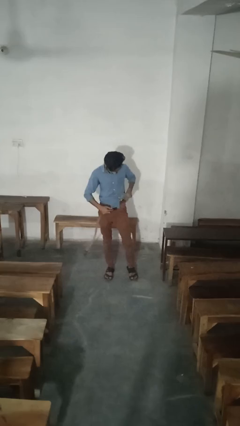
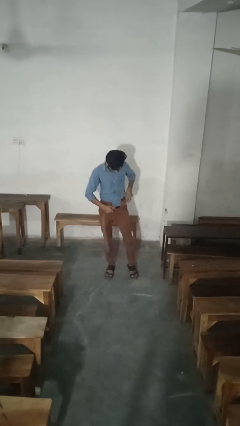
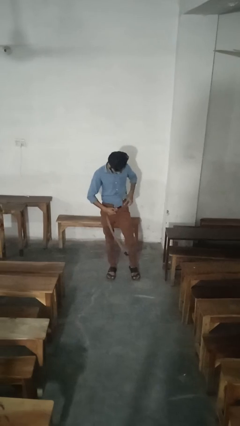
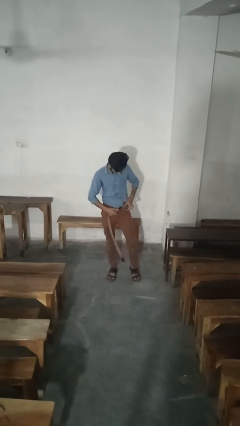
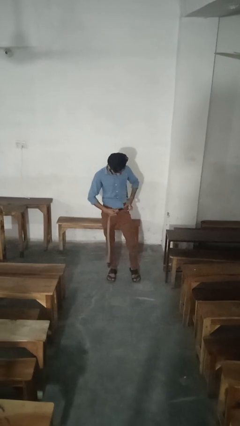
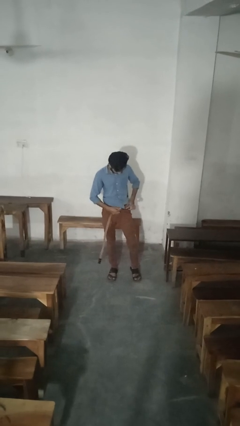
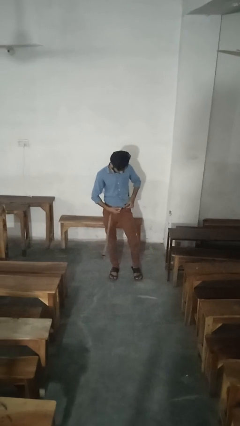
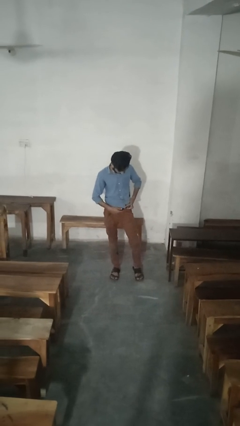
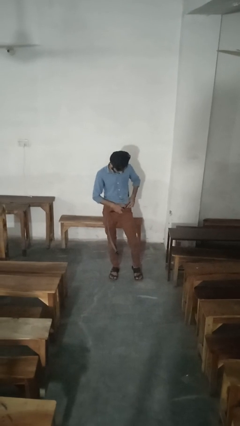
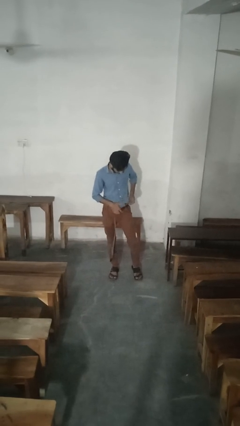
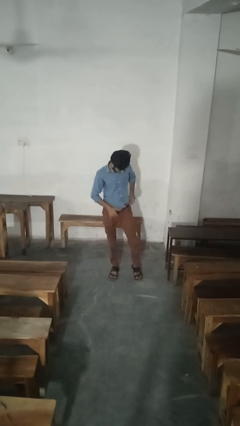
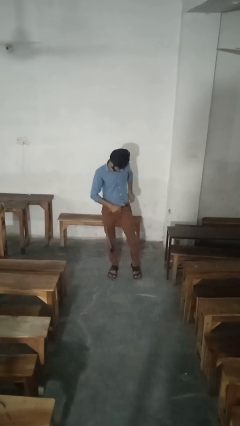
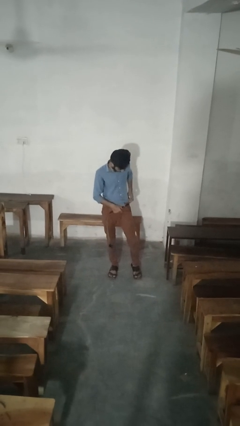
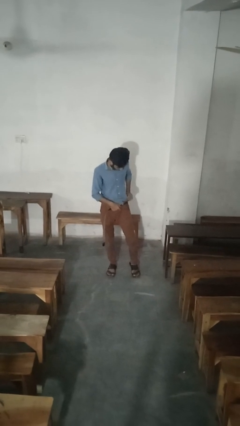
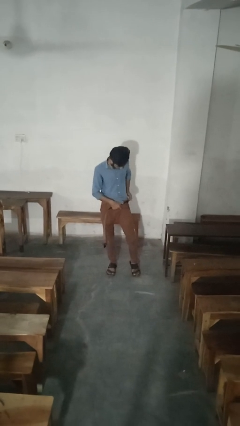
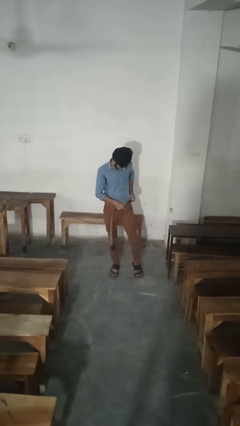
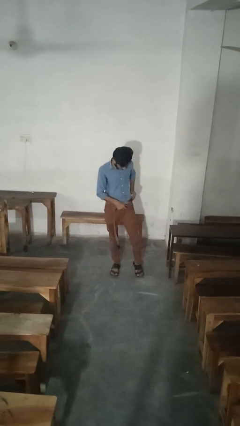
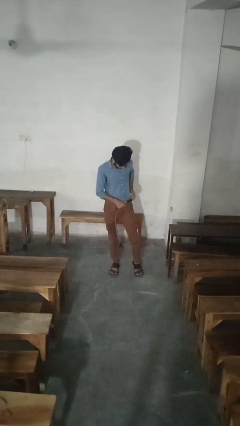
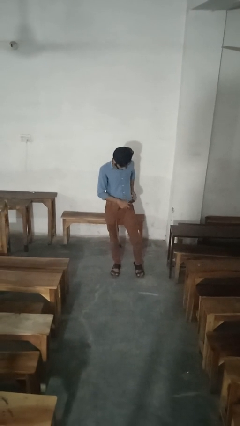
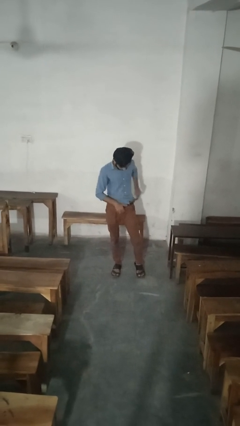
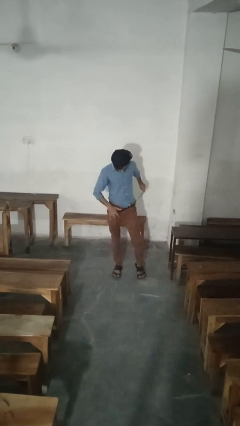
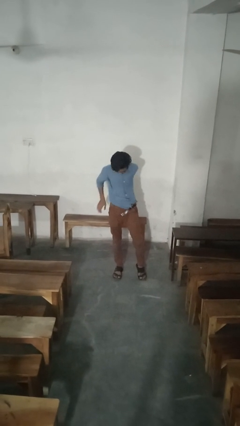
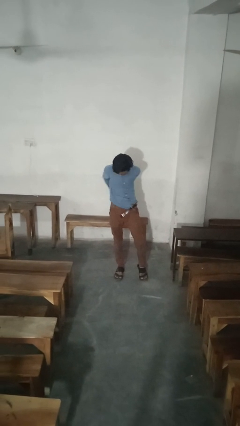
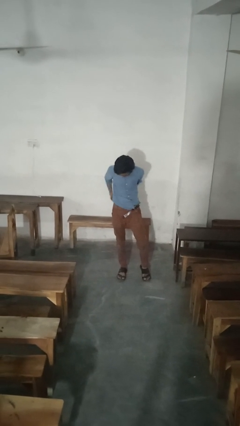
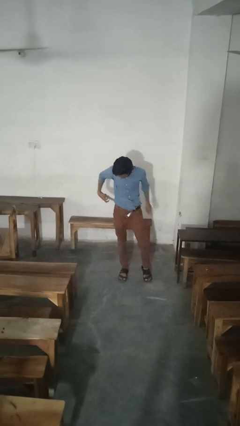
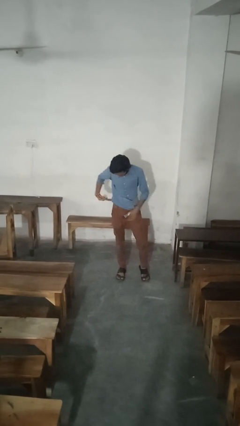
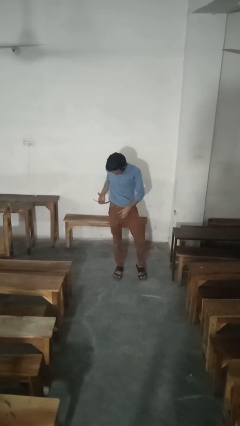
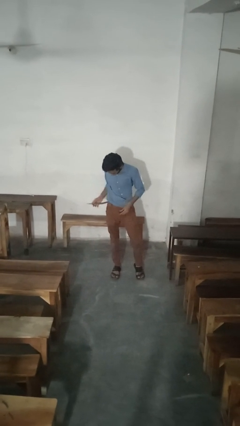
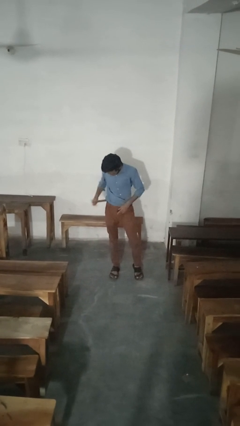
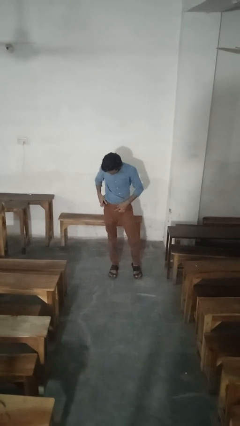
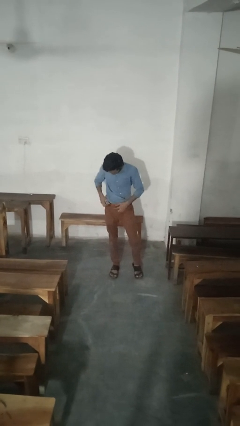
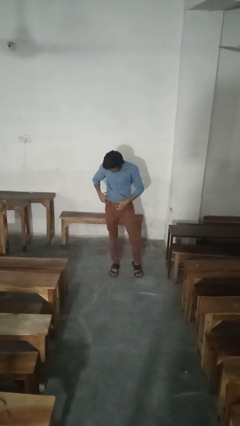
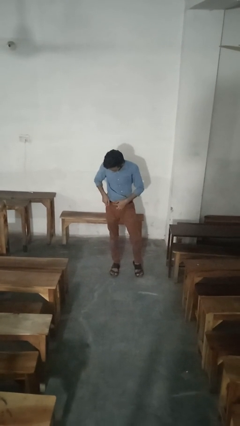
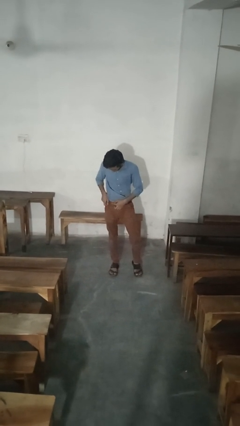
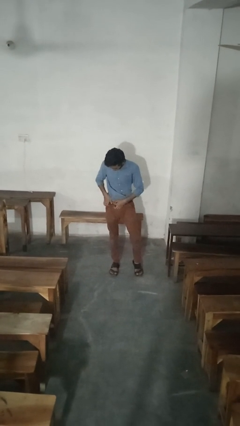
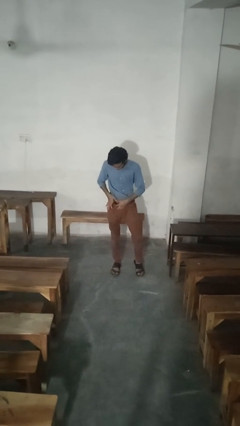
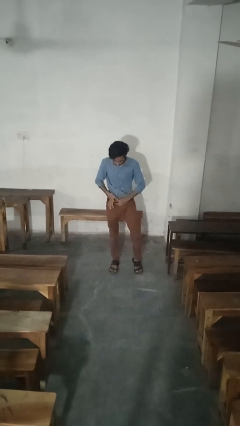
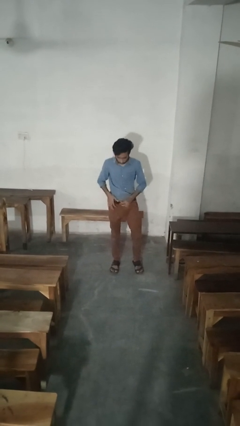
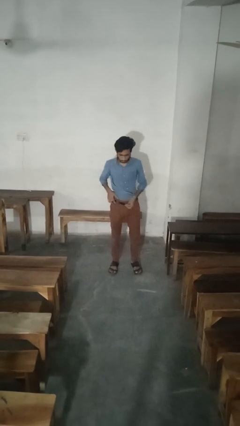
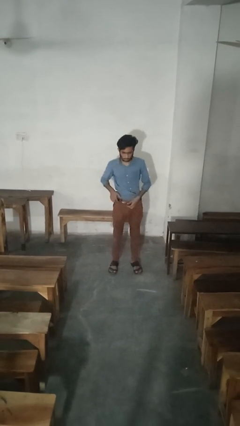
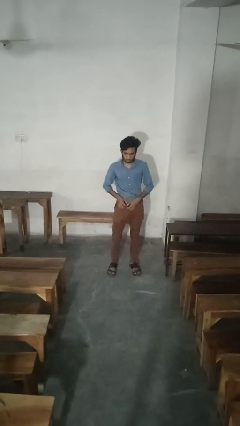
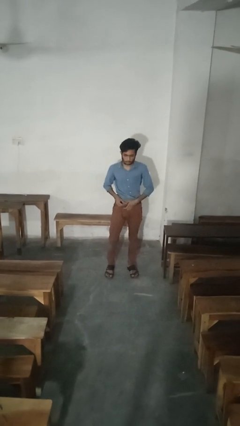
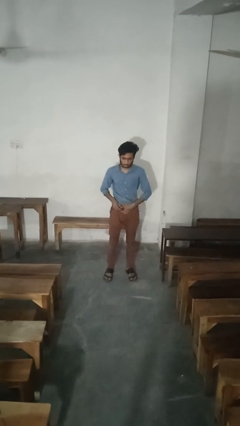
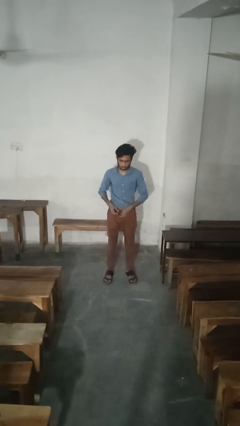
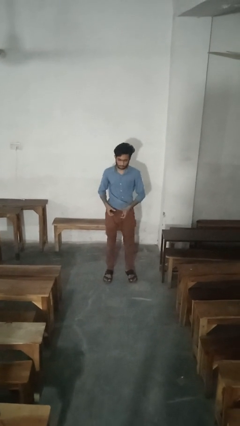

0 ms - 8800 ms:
person puts on belt

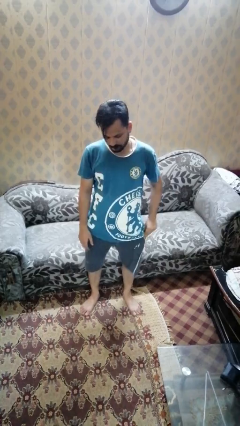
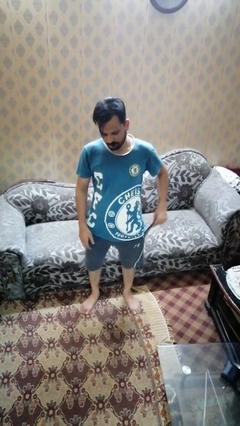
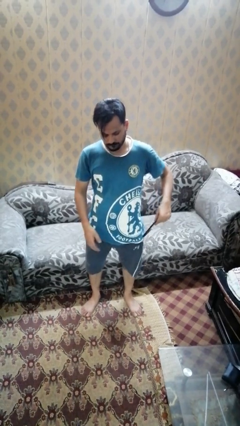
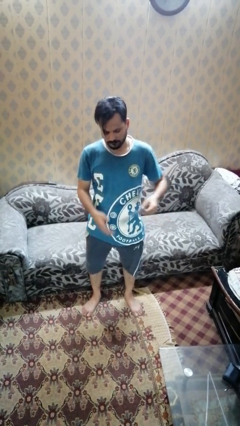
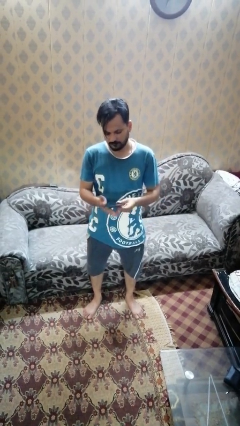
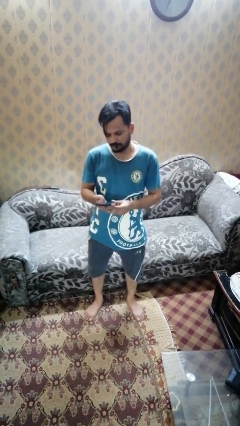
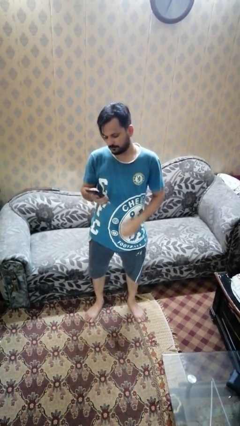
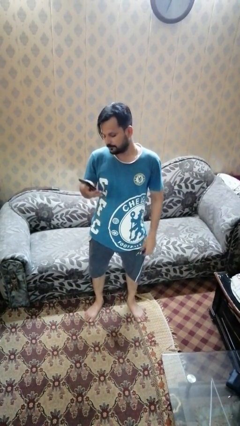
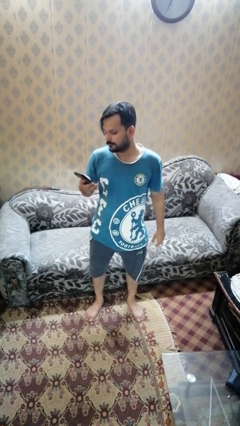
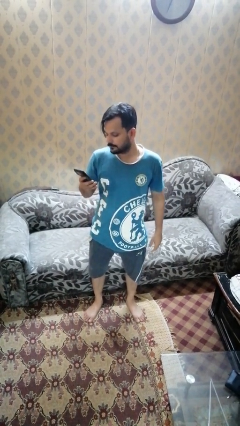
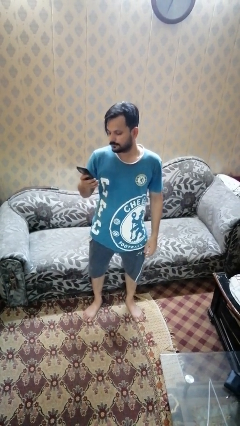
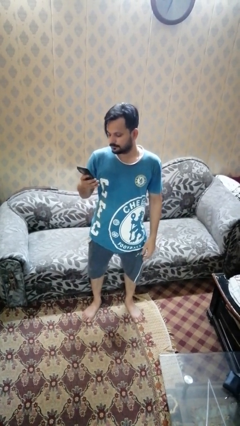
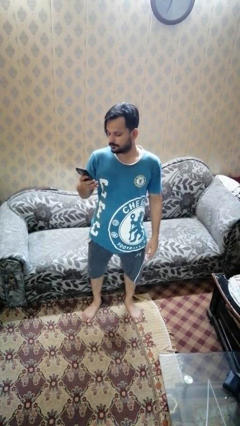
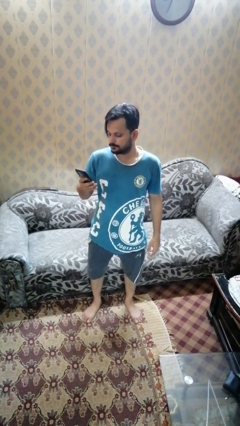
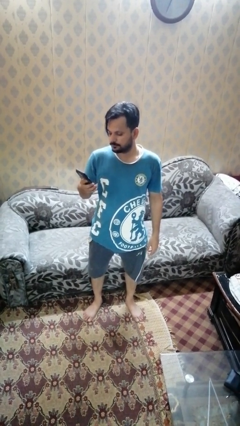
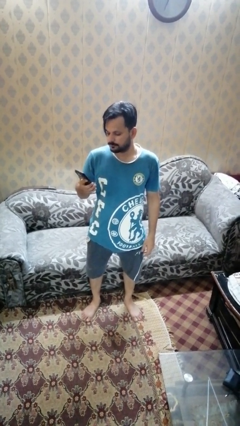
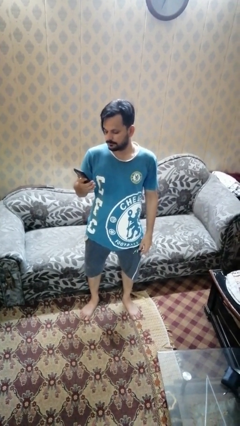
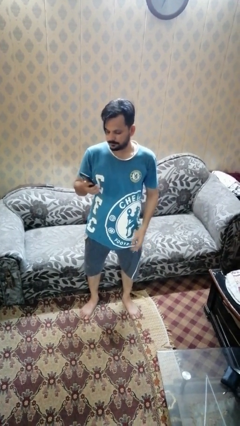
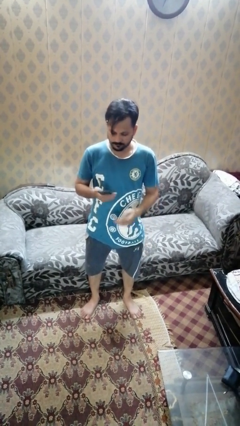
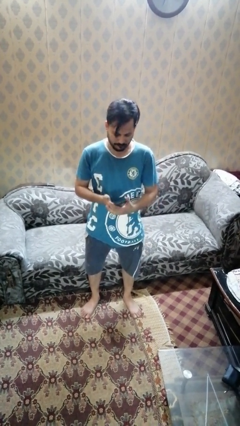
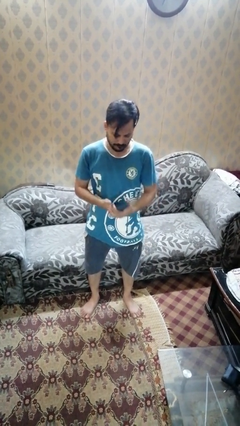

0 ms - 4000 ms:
person takes phone from pocket

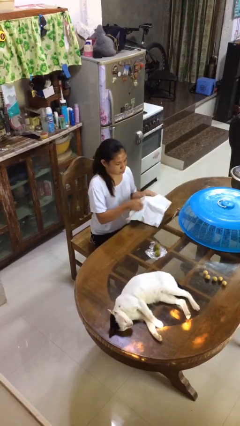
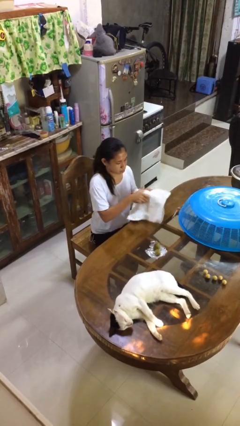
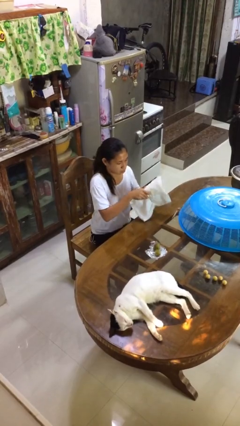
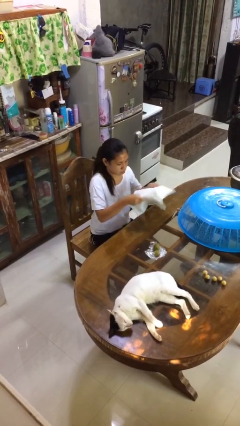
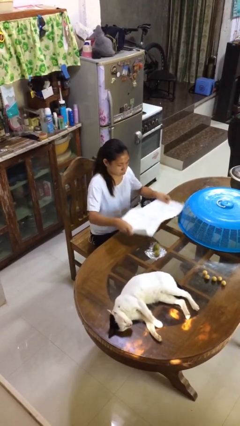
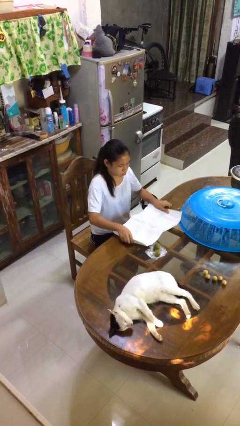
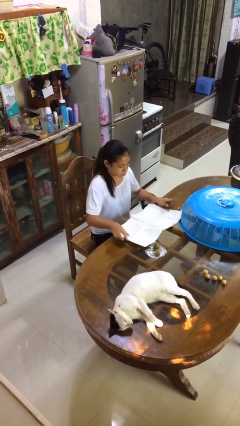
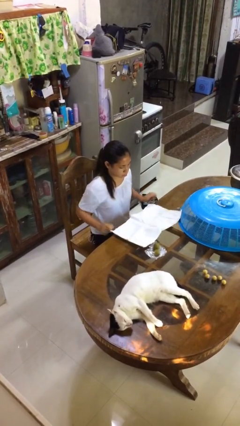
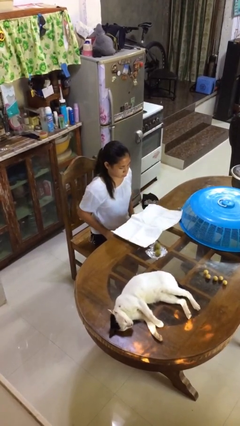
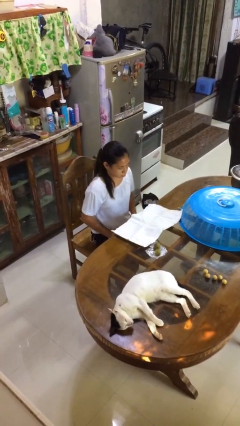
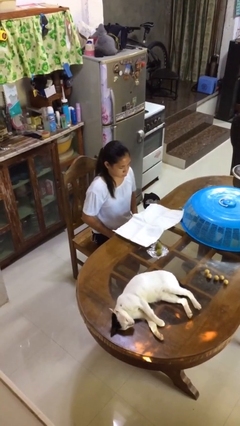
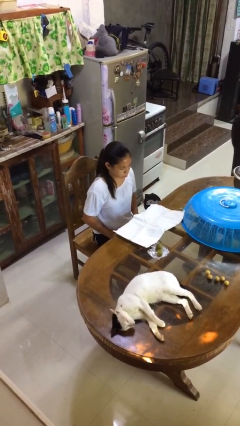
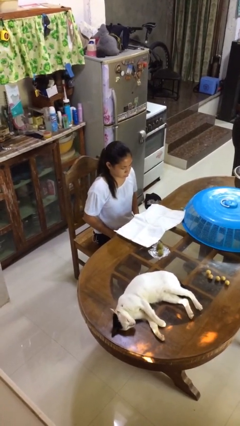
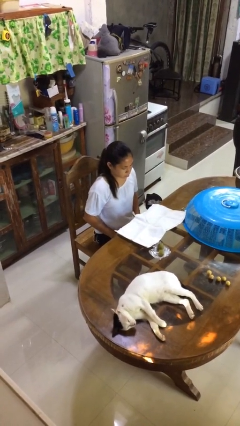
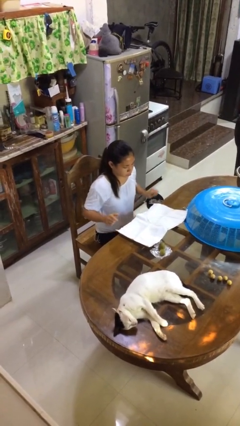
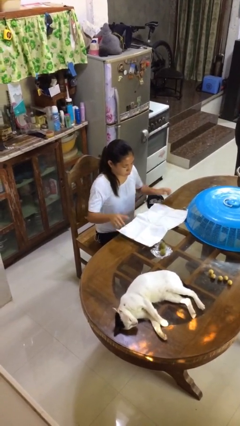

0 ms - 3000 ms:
person spreads tablecloth

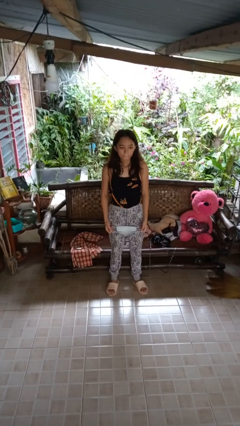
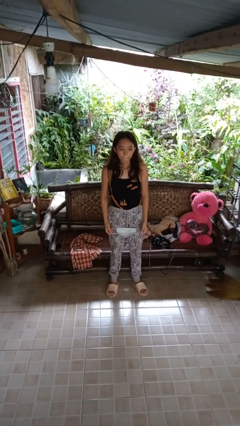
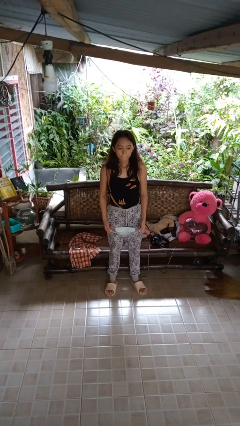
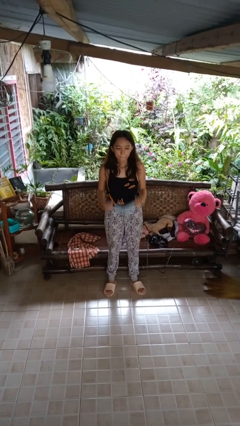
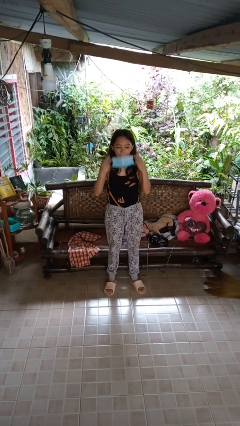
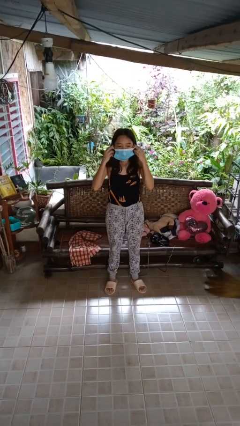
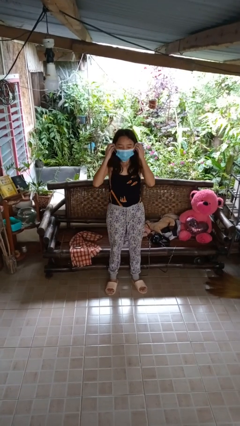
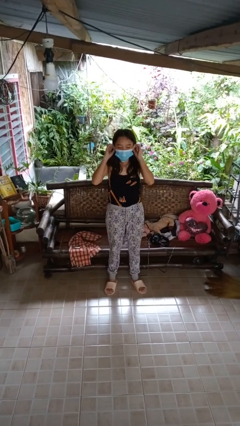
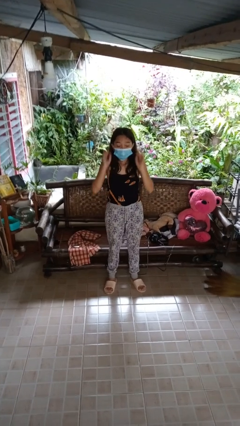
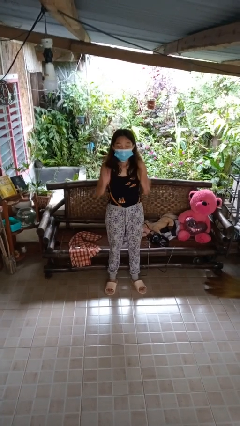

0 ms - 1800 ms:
person puts on facemask
